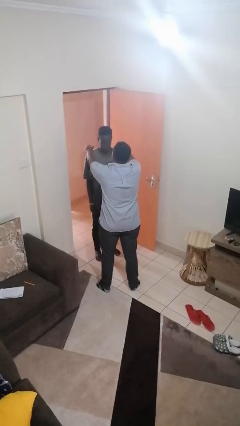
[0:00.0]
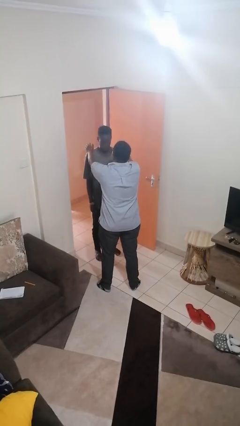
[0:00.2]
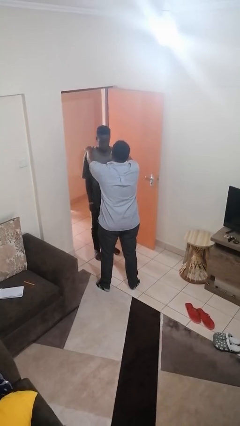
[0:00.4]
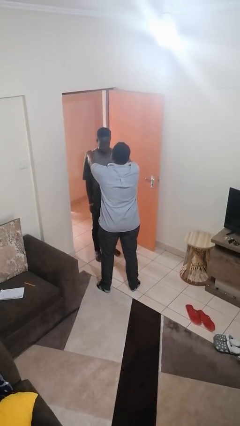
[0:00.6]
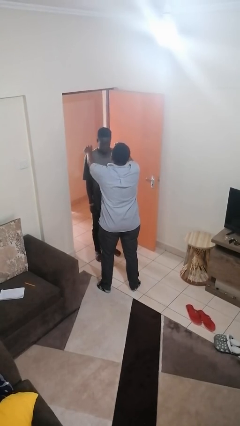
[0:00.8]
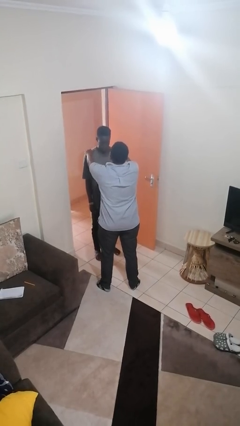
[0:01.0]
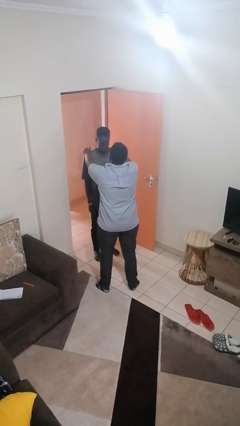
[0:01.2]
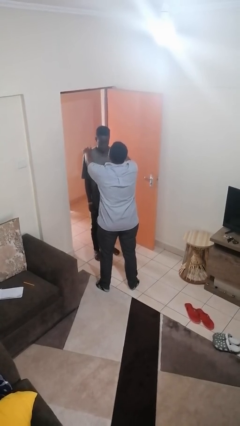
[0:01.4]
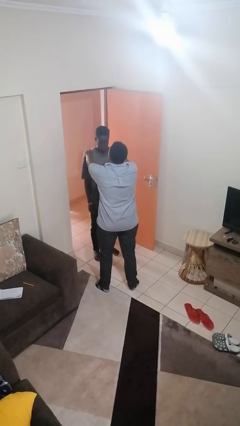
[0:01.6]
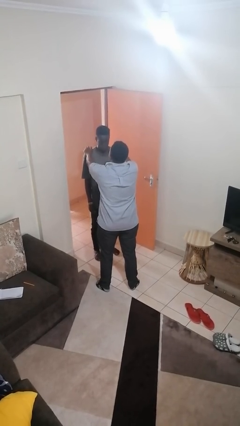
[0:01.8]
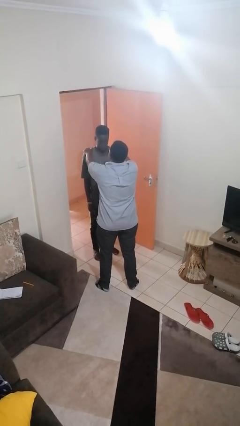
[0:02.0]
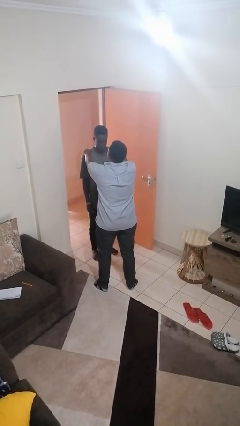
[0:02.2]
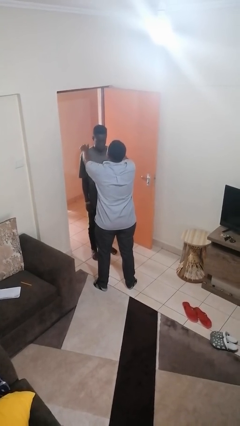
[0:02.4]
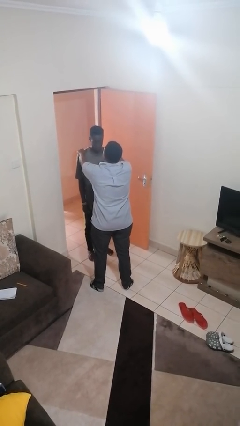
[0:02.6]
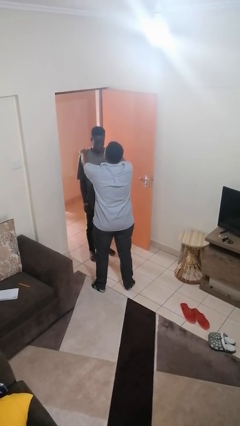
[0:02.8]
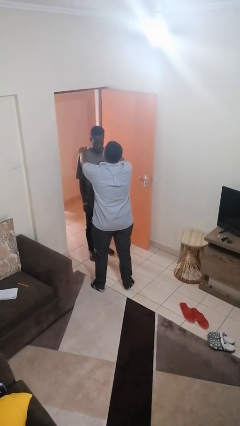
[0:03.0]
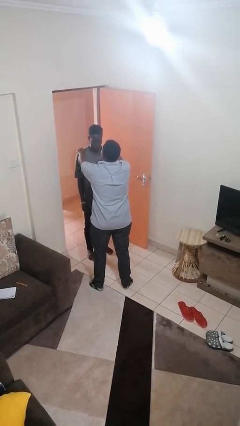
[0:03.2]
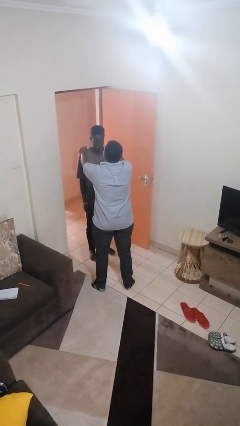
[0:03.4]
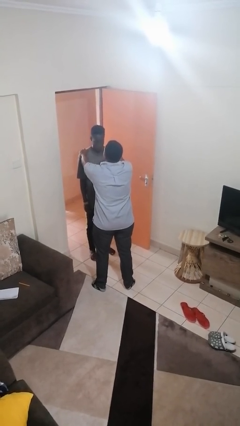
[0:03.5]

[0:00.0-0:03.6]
person pounds shoulders of person

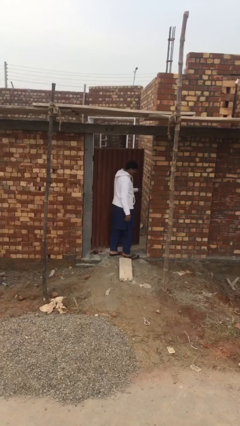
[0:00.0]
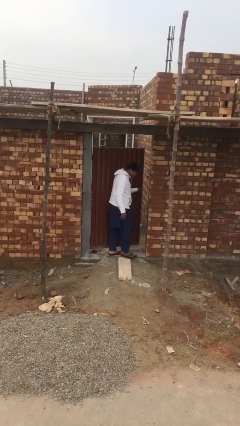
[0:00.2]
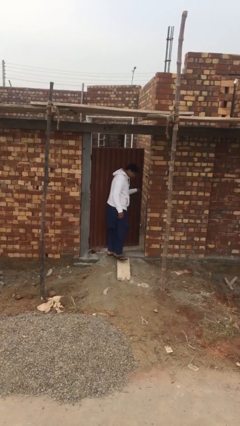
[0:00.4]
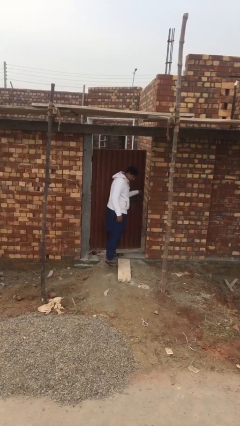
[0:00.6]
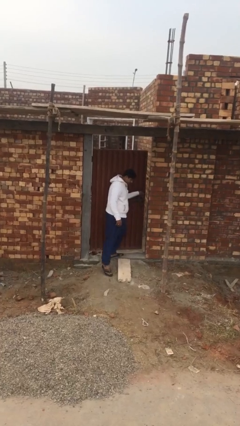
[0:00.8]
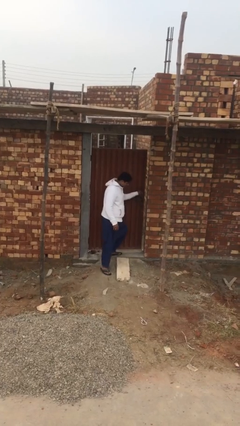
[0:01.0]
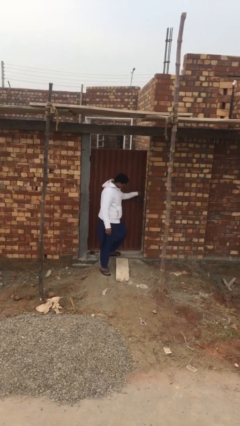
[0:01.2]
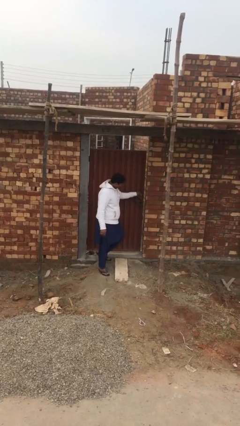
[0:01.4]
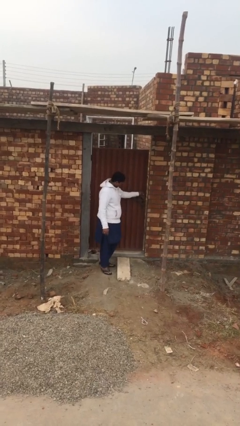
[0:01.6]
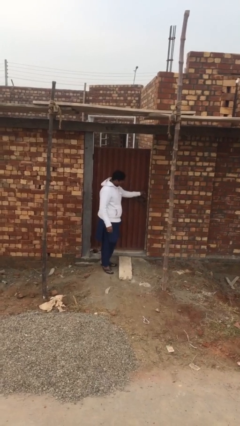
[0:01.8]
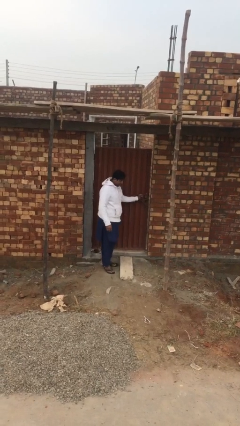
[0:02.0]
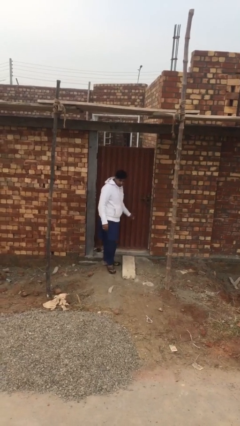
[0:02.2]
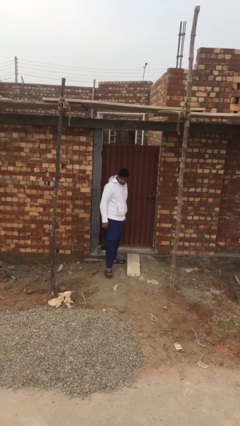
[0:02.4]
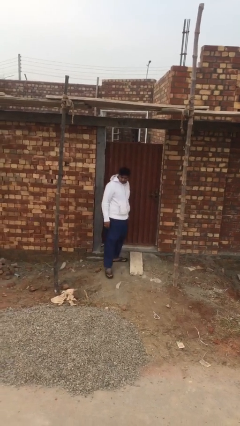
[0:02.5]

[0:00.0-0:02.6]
person closes facility door

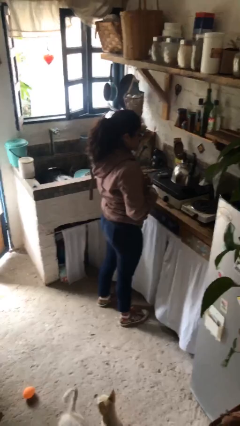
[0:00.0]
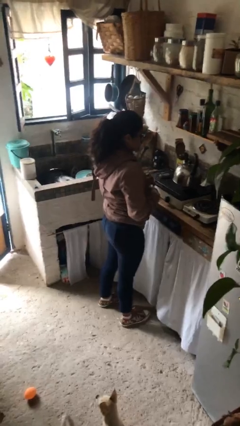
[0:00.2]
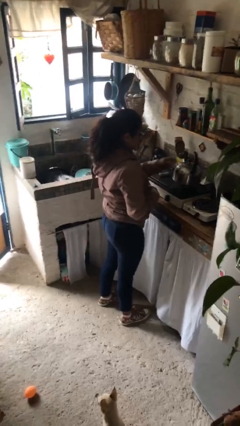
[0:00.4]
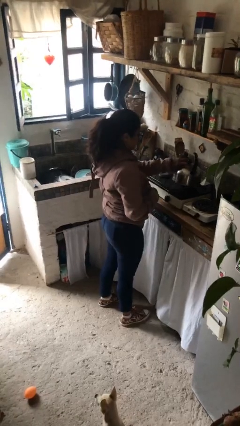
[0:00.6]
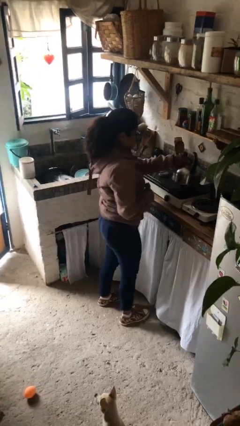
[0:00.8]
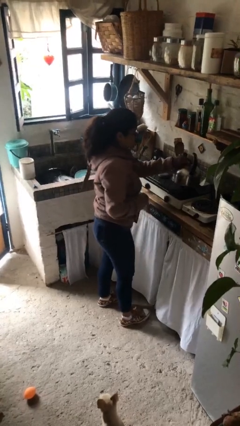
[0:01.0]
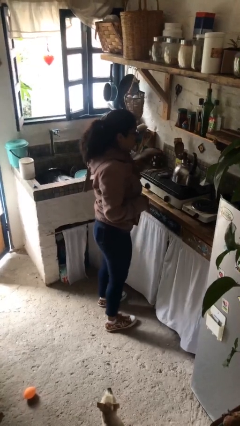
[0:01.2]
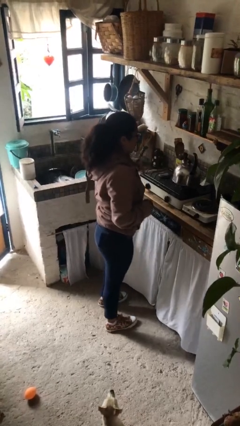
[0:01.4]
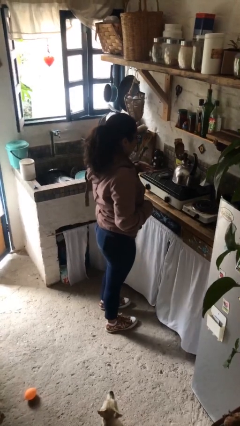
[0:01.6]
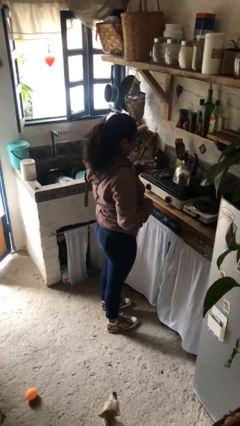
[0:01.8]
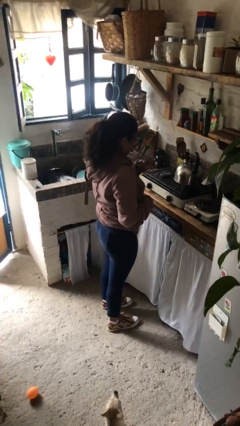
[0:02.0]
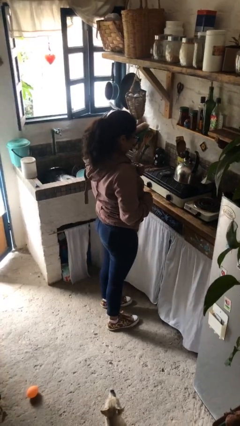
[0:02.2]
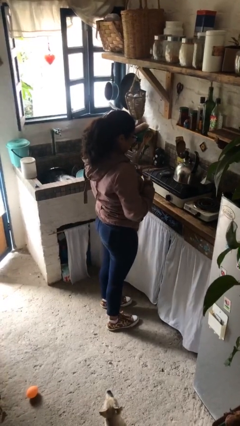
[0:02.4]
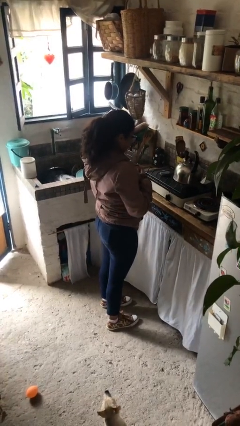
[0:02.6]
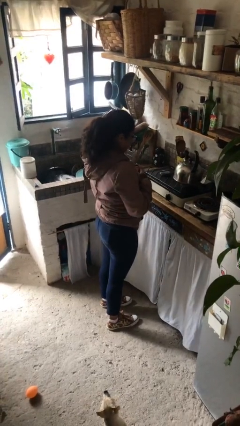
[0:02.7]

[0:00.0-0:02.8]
person burns hand

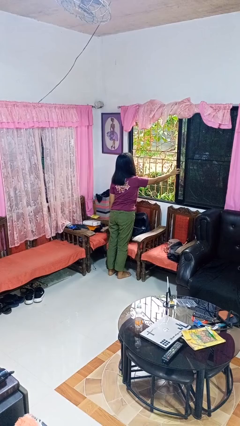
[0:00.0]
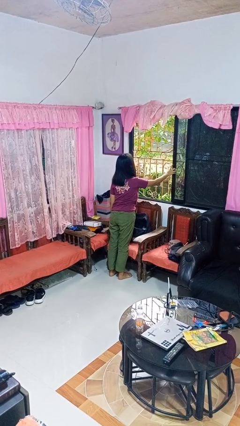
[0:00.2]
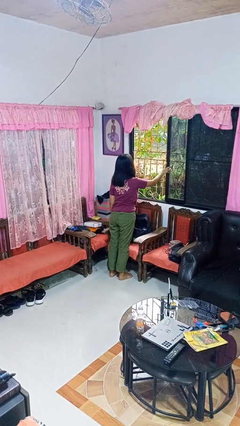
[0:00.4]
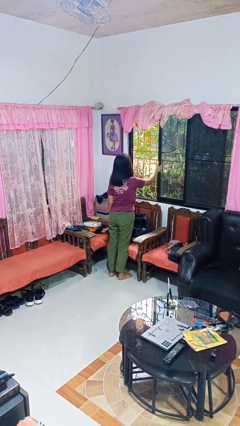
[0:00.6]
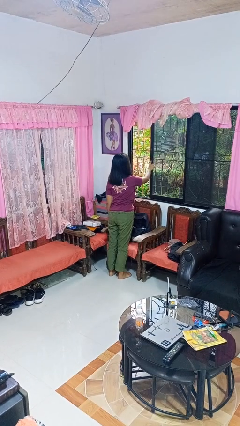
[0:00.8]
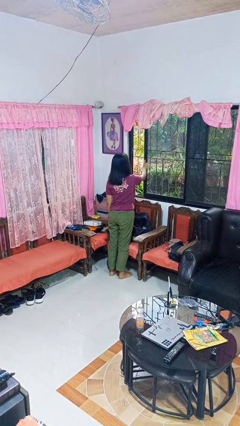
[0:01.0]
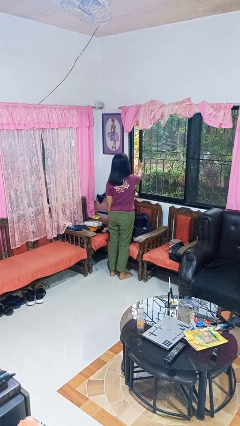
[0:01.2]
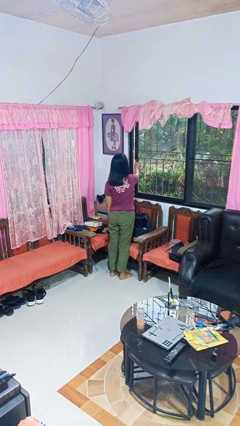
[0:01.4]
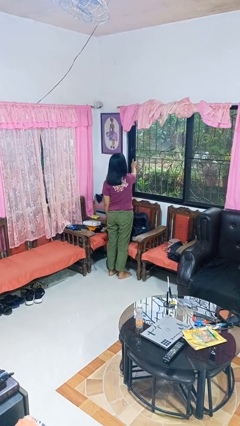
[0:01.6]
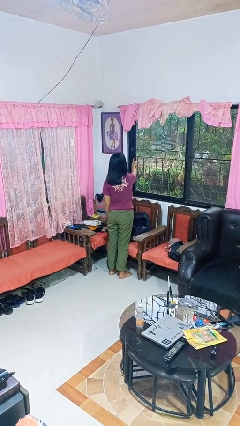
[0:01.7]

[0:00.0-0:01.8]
person closes home window

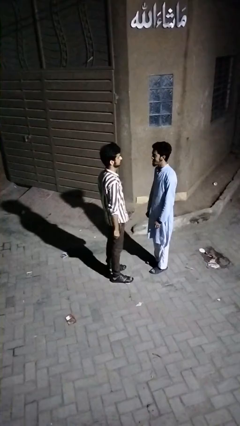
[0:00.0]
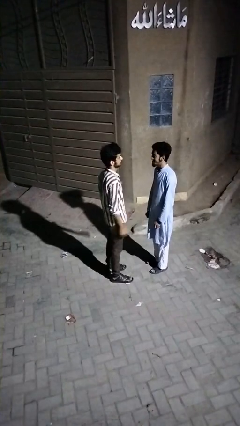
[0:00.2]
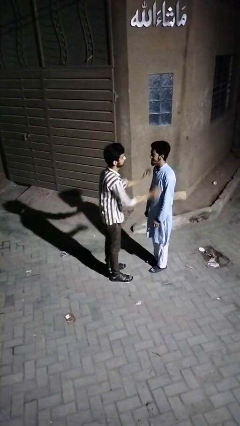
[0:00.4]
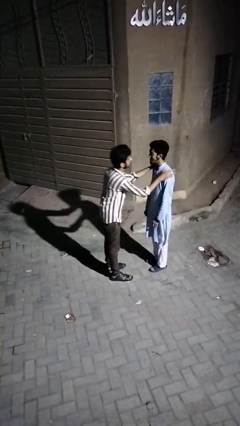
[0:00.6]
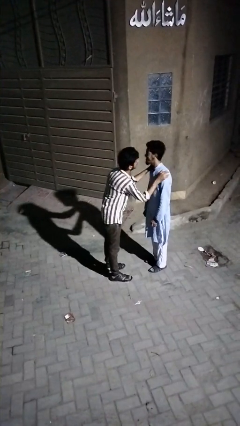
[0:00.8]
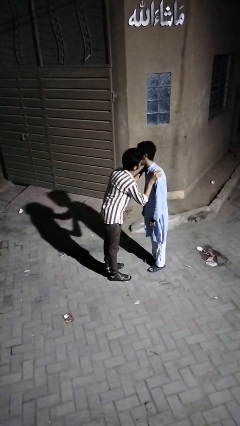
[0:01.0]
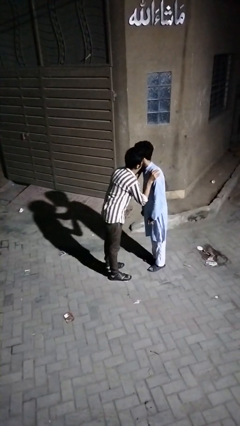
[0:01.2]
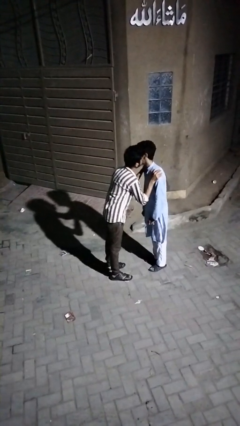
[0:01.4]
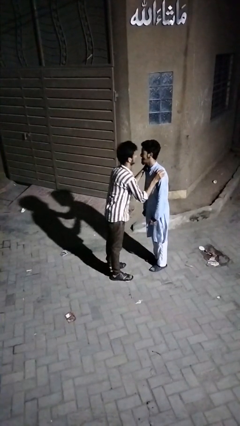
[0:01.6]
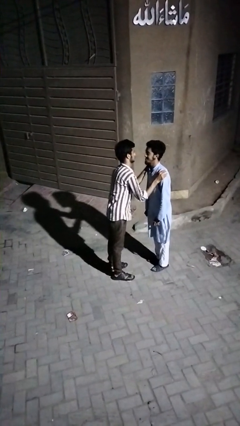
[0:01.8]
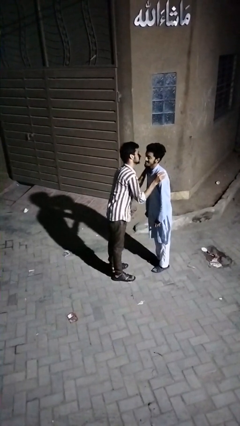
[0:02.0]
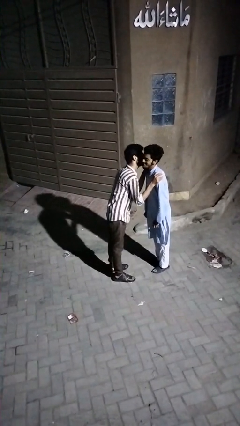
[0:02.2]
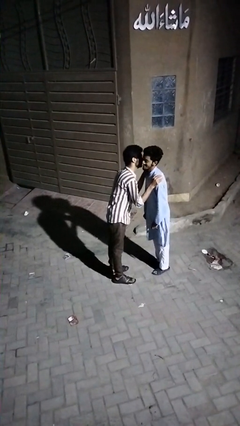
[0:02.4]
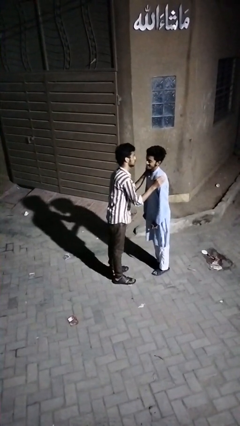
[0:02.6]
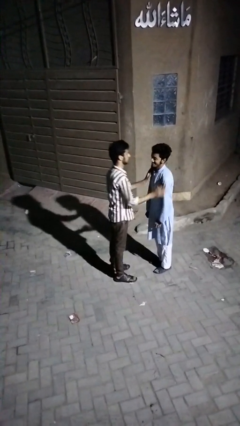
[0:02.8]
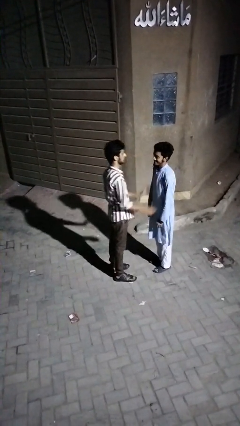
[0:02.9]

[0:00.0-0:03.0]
person kisses cheek of person

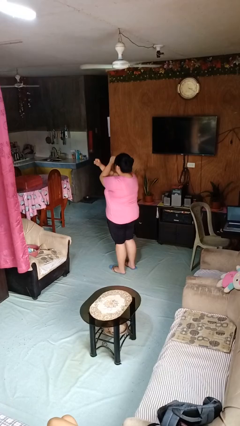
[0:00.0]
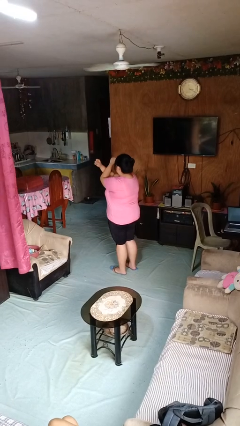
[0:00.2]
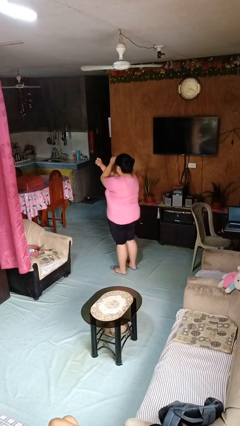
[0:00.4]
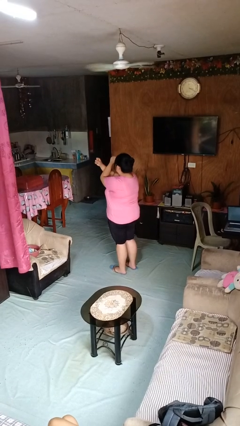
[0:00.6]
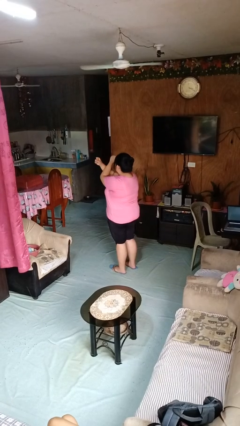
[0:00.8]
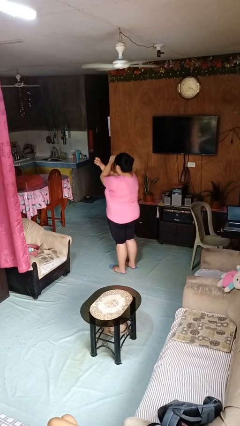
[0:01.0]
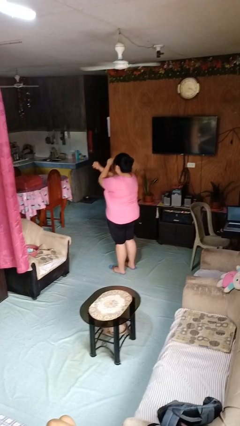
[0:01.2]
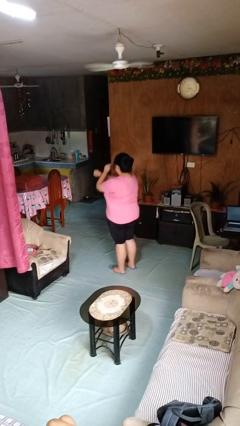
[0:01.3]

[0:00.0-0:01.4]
person gestures arms x

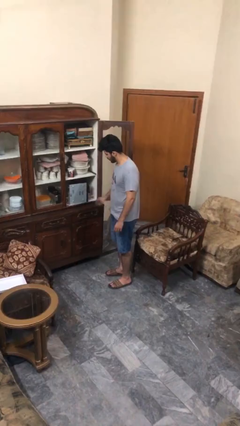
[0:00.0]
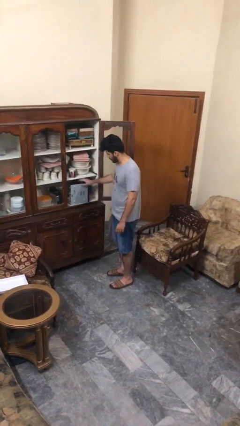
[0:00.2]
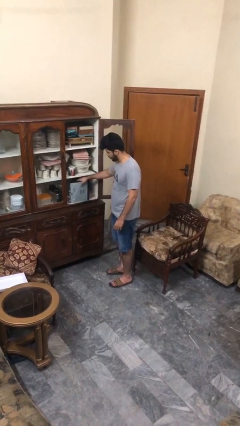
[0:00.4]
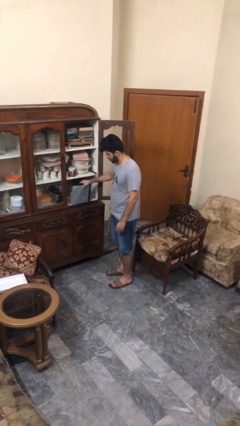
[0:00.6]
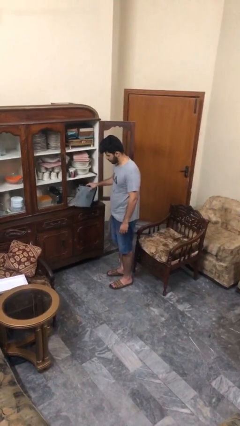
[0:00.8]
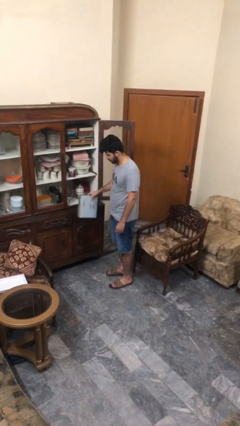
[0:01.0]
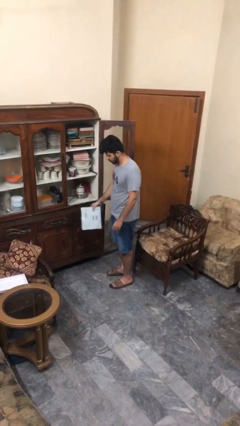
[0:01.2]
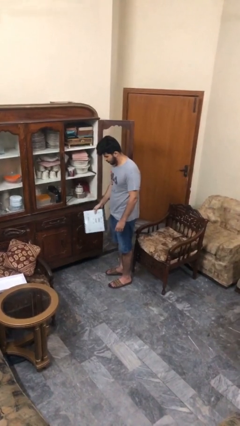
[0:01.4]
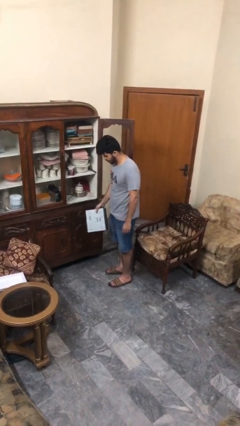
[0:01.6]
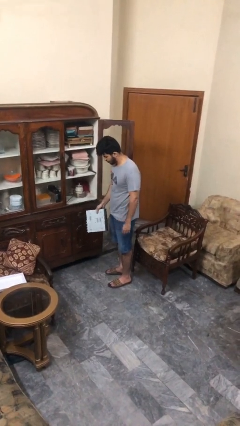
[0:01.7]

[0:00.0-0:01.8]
person picks up object from cabinet
